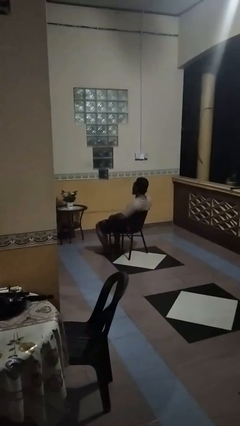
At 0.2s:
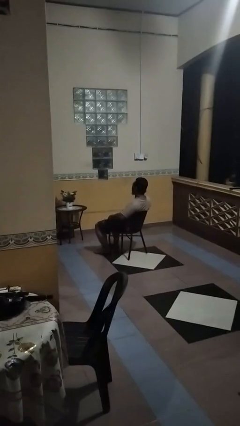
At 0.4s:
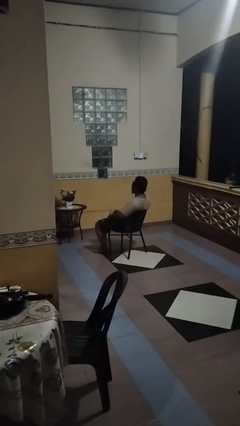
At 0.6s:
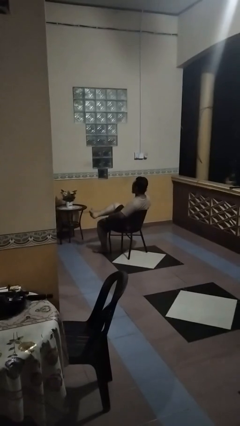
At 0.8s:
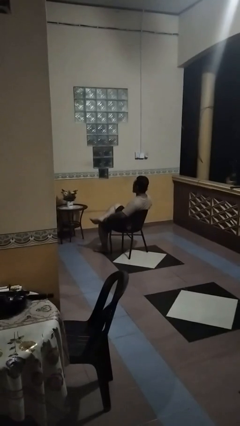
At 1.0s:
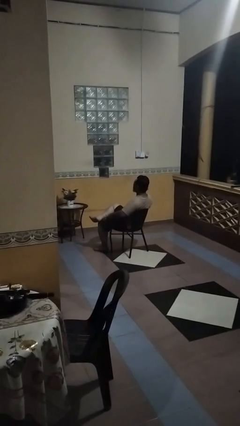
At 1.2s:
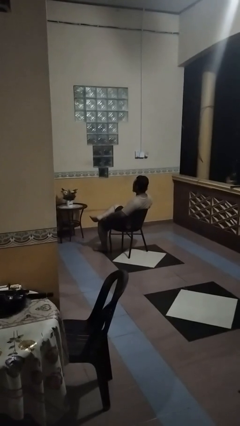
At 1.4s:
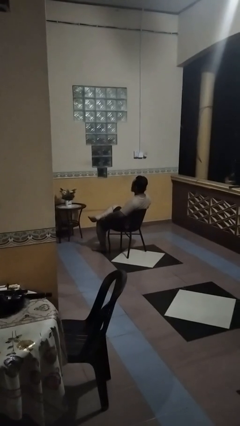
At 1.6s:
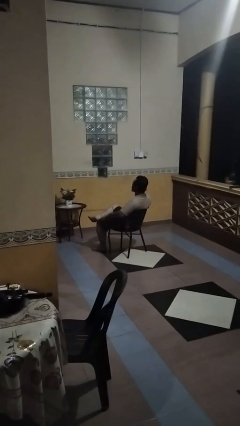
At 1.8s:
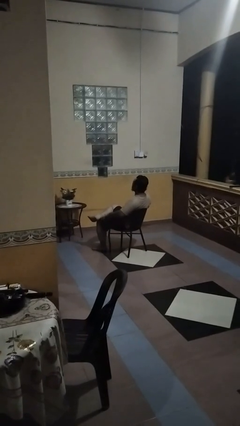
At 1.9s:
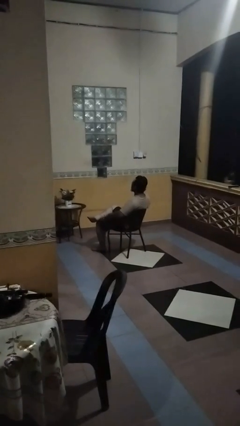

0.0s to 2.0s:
person crosses legs

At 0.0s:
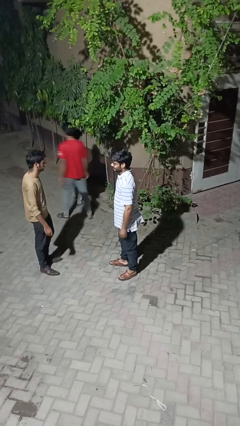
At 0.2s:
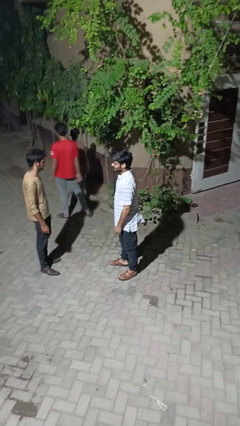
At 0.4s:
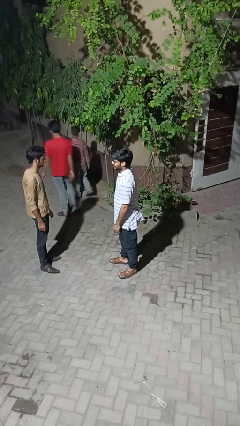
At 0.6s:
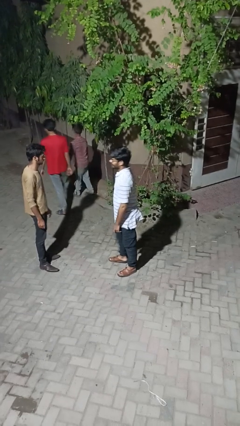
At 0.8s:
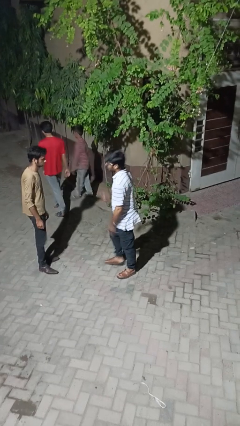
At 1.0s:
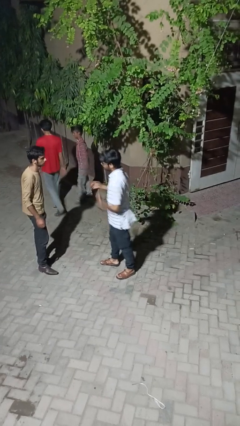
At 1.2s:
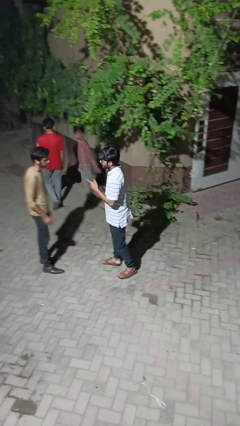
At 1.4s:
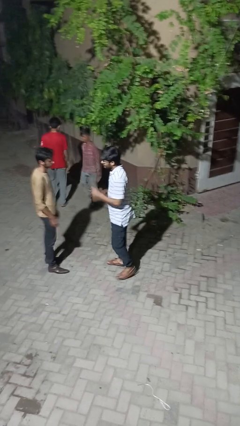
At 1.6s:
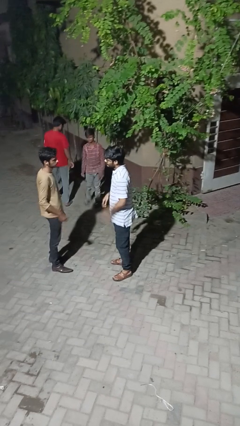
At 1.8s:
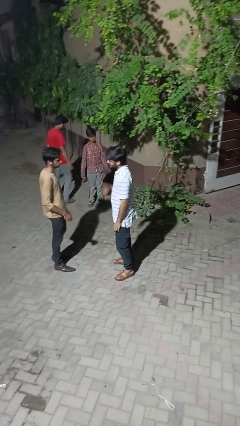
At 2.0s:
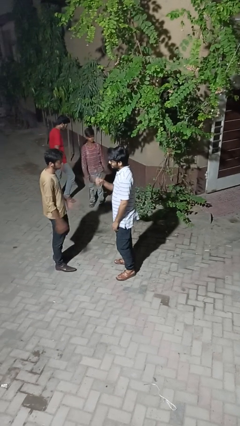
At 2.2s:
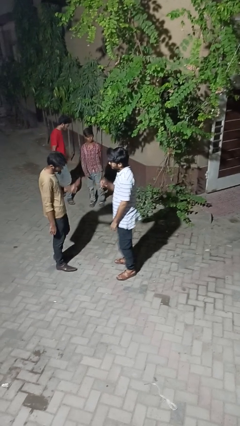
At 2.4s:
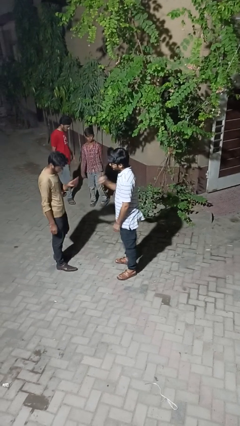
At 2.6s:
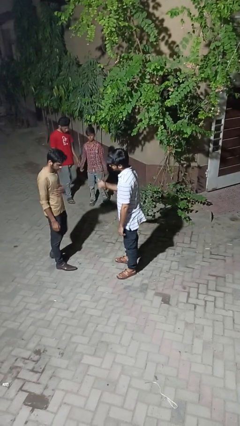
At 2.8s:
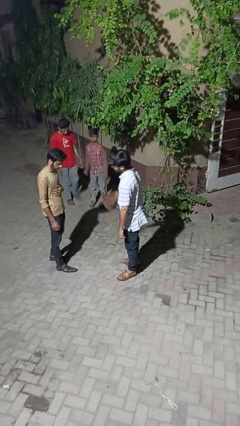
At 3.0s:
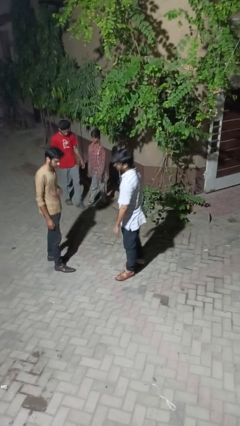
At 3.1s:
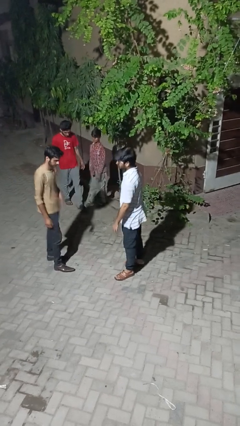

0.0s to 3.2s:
person talks to person

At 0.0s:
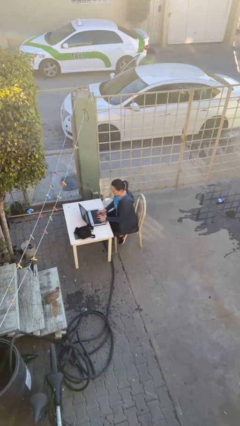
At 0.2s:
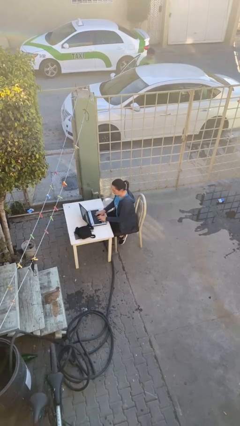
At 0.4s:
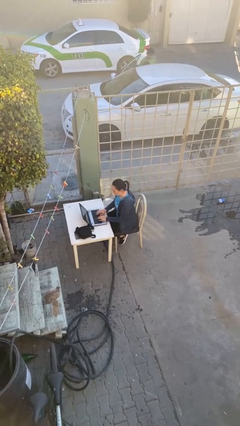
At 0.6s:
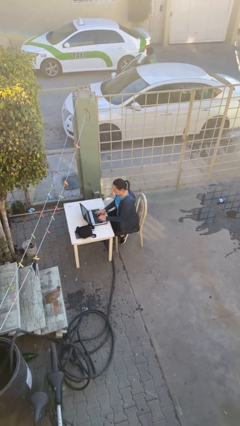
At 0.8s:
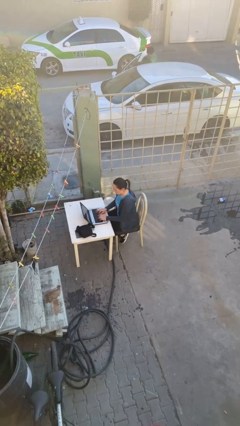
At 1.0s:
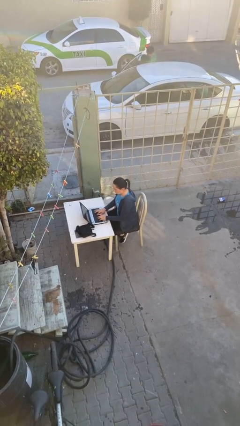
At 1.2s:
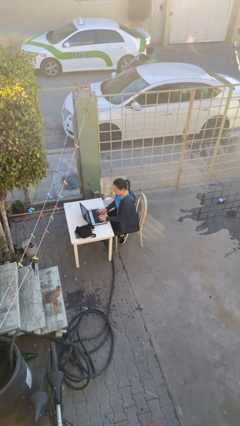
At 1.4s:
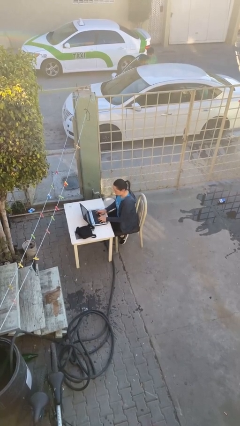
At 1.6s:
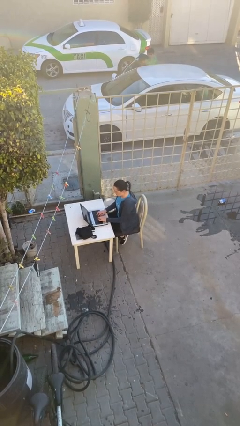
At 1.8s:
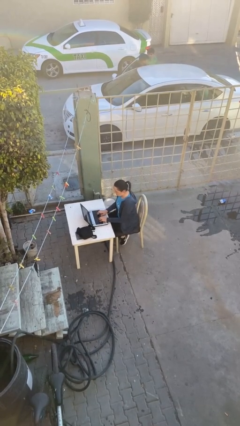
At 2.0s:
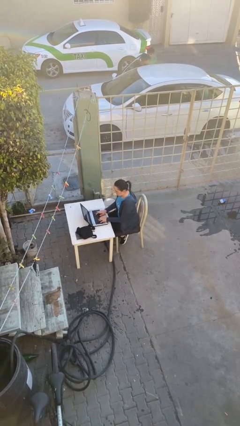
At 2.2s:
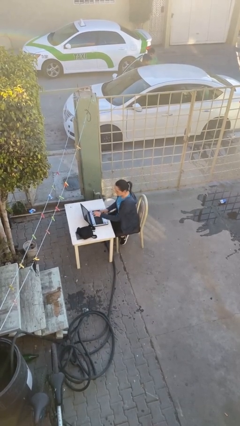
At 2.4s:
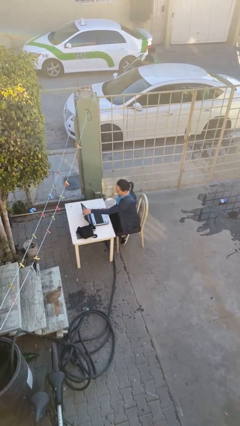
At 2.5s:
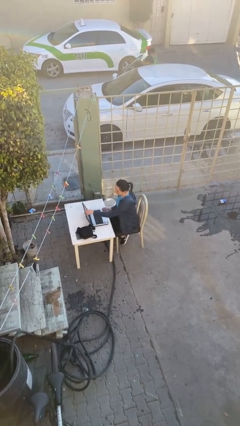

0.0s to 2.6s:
person interacts with laptop

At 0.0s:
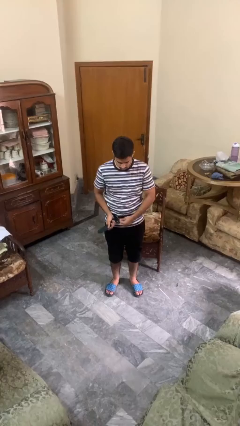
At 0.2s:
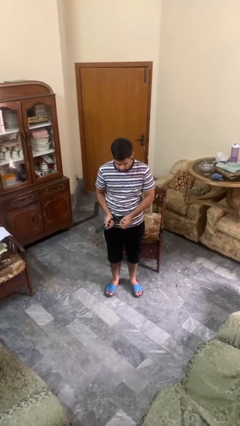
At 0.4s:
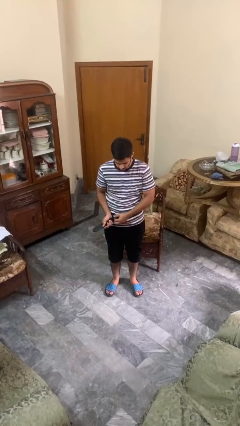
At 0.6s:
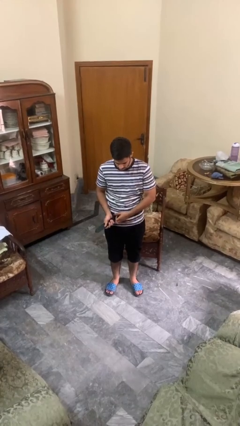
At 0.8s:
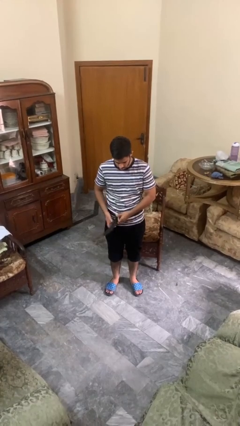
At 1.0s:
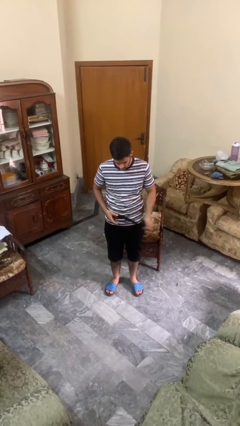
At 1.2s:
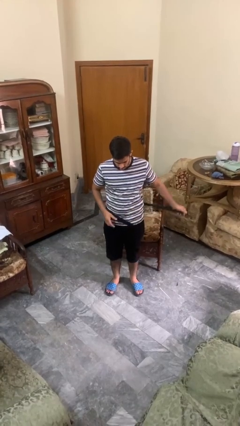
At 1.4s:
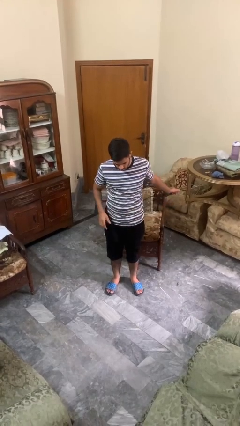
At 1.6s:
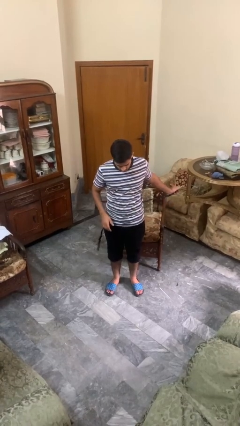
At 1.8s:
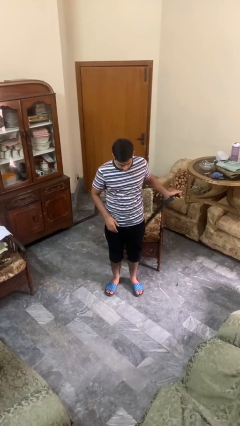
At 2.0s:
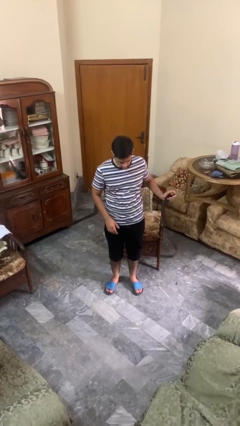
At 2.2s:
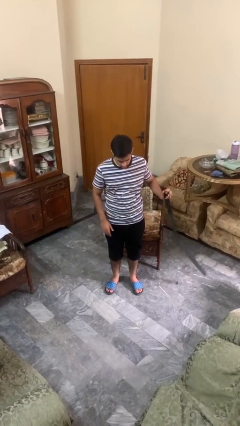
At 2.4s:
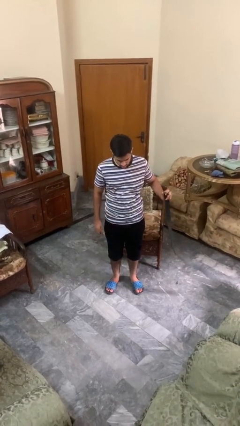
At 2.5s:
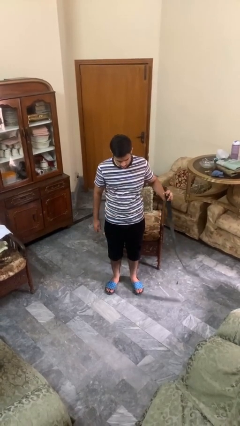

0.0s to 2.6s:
person takes off belt

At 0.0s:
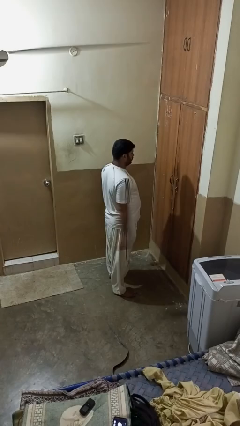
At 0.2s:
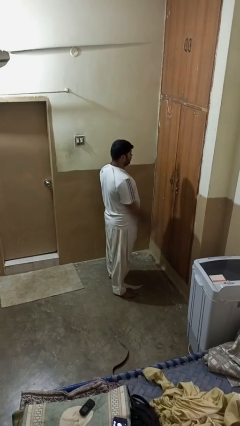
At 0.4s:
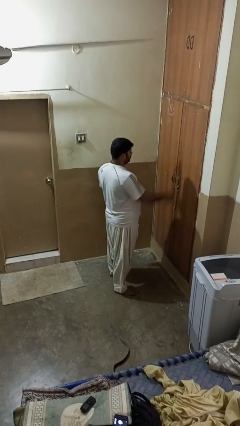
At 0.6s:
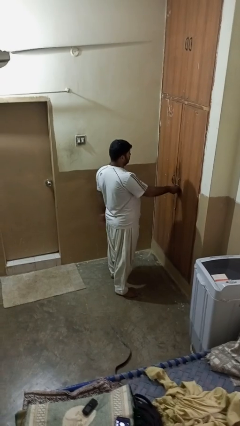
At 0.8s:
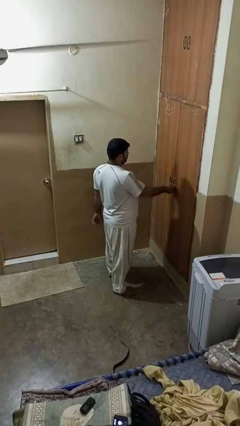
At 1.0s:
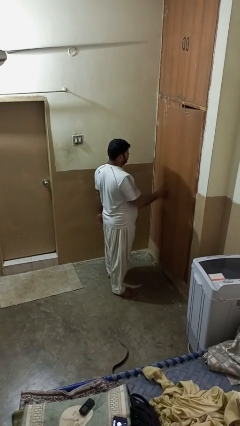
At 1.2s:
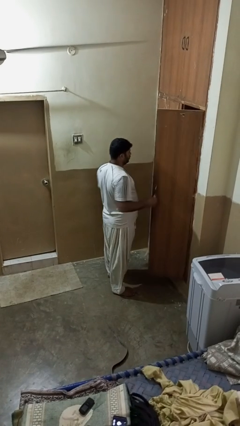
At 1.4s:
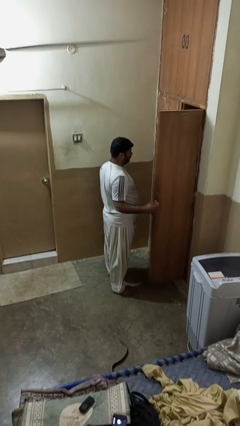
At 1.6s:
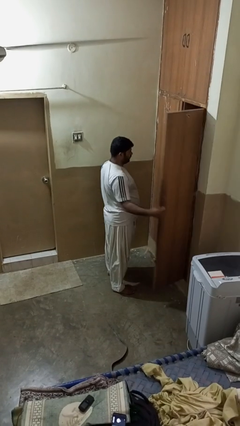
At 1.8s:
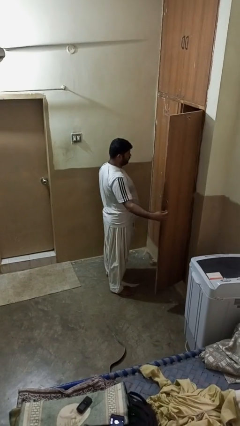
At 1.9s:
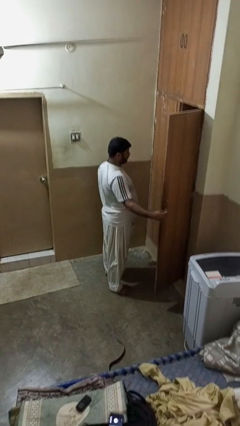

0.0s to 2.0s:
person opens closet door

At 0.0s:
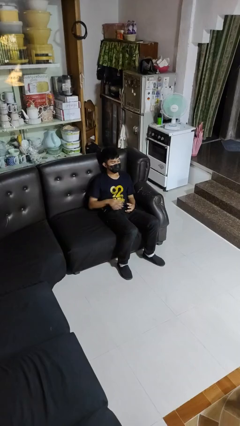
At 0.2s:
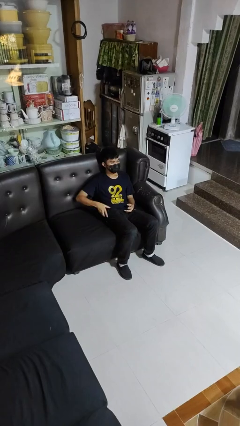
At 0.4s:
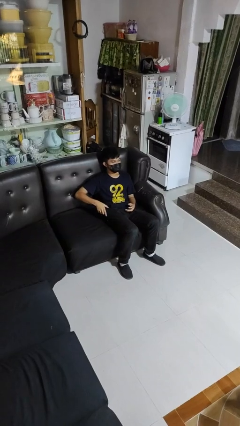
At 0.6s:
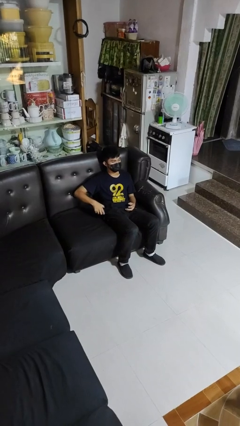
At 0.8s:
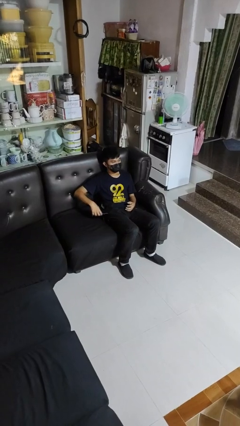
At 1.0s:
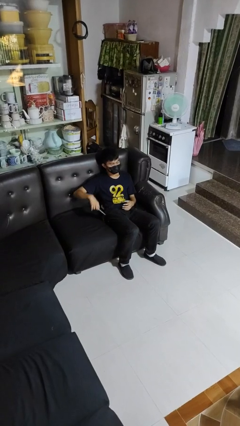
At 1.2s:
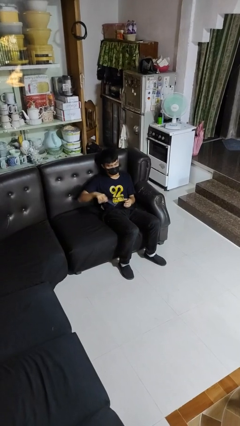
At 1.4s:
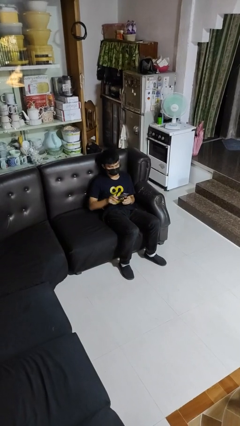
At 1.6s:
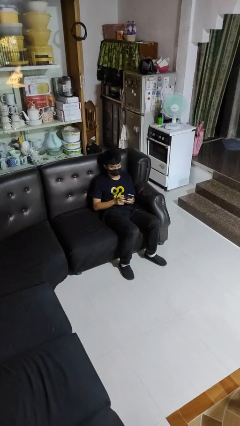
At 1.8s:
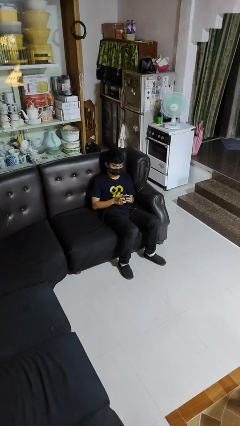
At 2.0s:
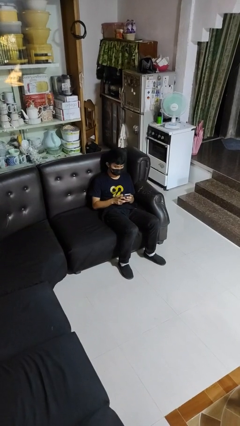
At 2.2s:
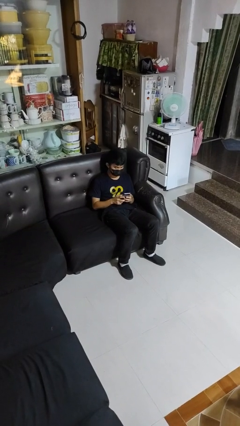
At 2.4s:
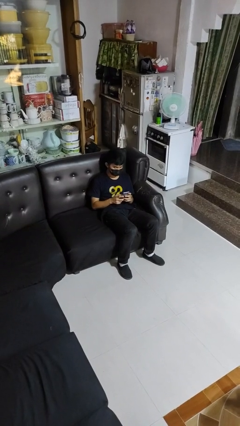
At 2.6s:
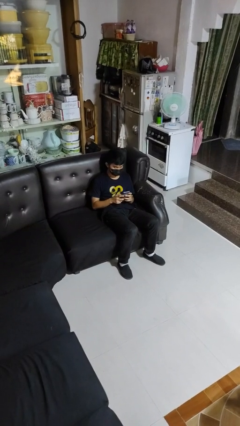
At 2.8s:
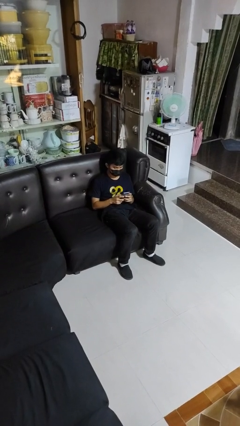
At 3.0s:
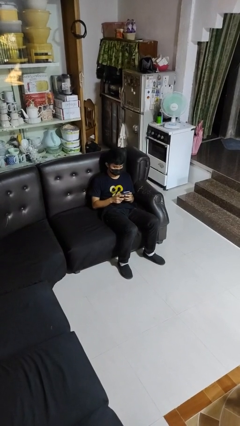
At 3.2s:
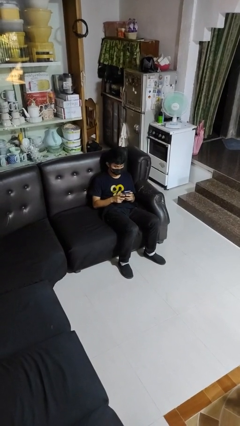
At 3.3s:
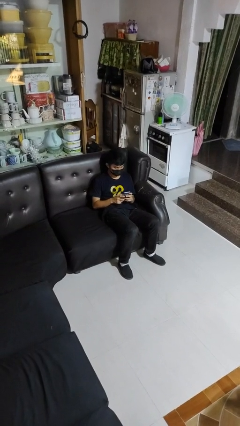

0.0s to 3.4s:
person takes phone from pocket

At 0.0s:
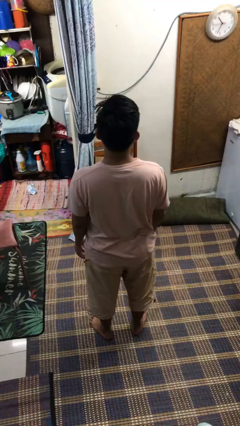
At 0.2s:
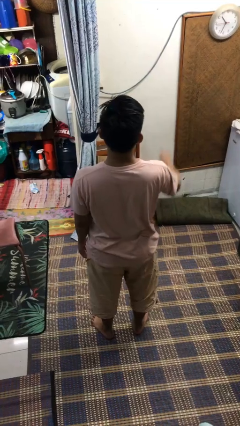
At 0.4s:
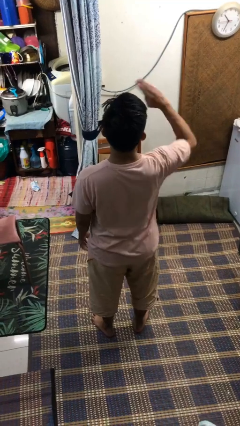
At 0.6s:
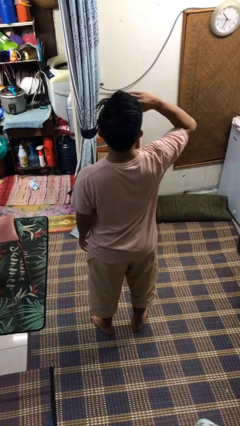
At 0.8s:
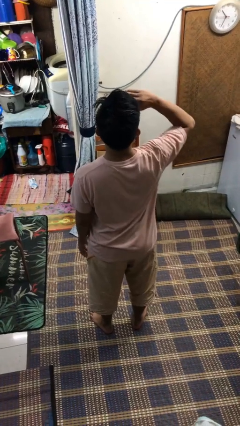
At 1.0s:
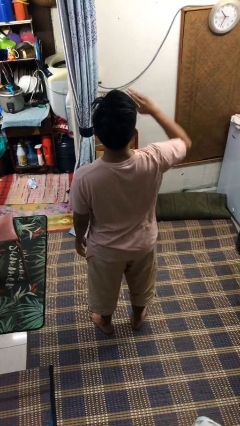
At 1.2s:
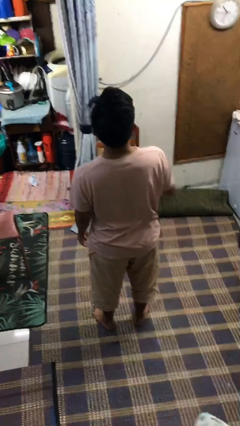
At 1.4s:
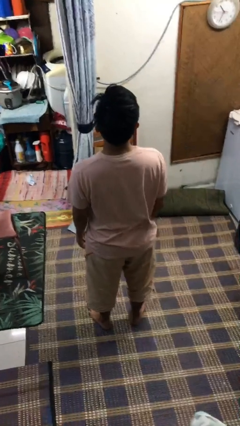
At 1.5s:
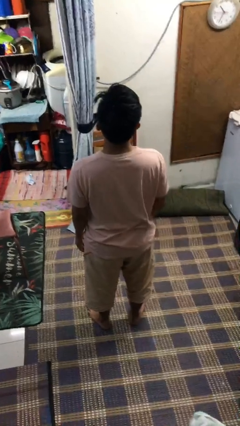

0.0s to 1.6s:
person salutes
